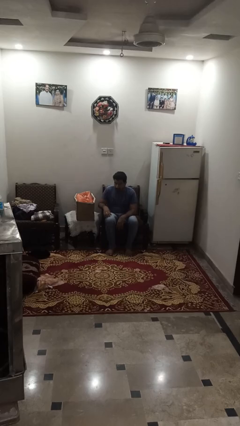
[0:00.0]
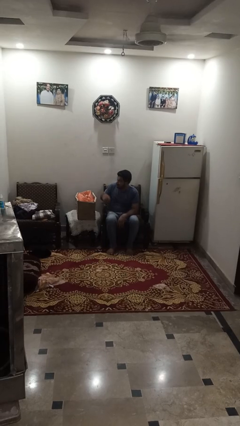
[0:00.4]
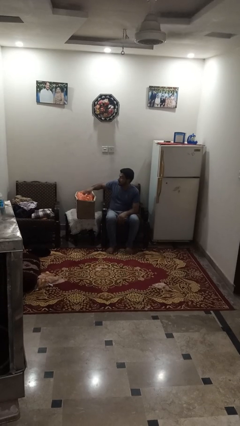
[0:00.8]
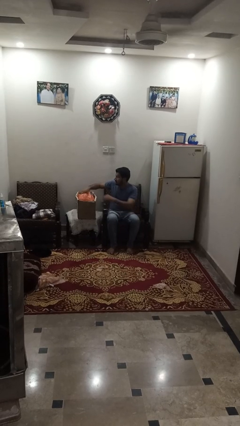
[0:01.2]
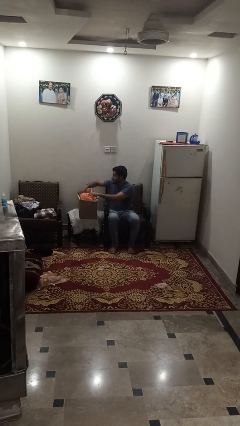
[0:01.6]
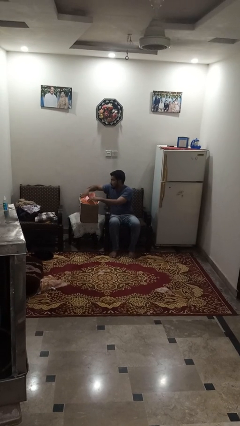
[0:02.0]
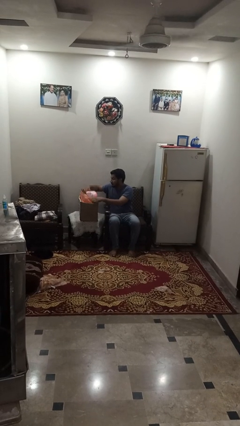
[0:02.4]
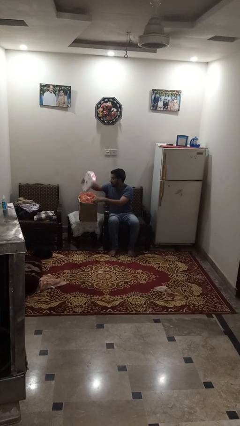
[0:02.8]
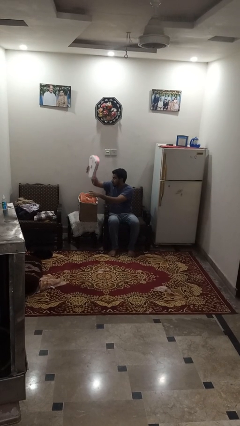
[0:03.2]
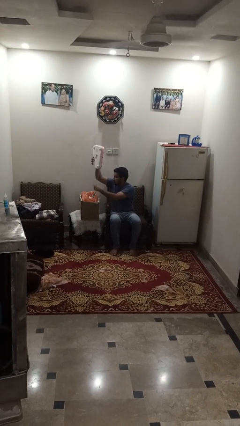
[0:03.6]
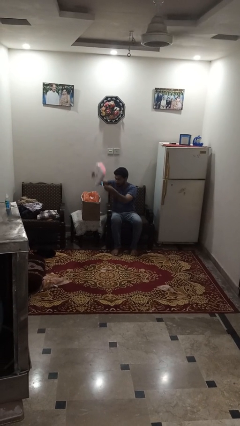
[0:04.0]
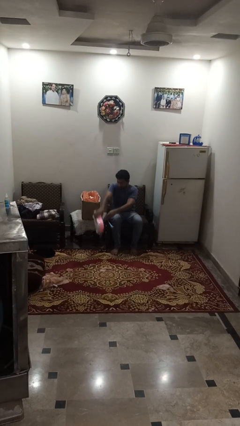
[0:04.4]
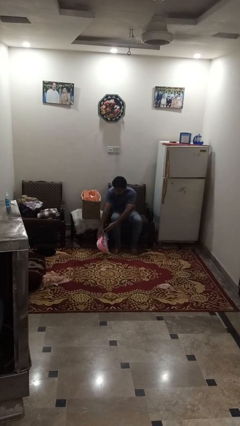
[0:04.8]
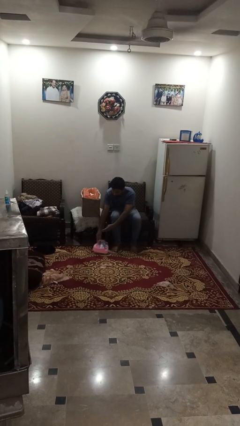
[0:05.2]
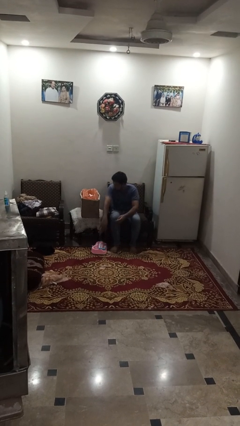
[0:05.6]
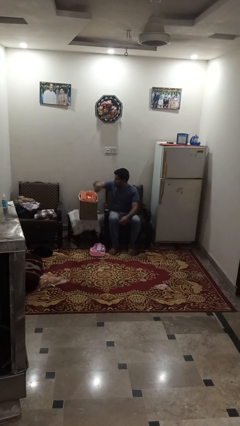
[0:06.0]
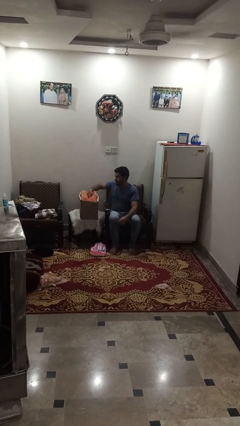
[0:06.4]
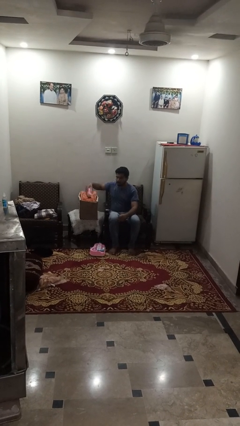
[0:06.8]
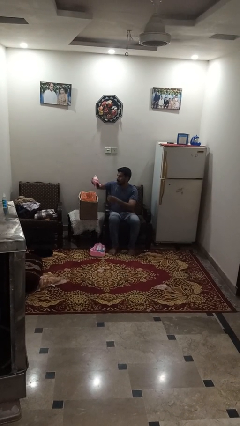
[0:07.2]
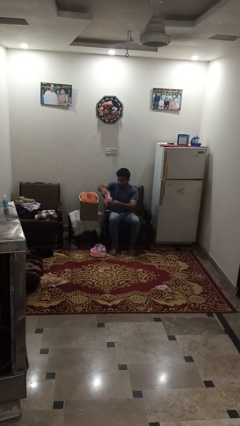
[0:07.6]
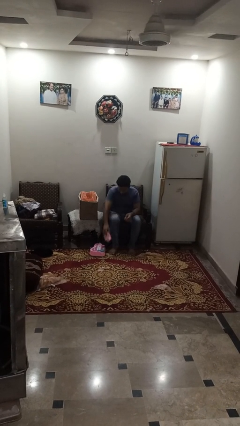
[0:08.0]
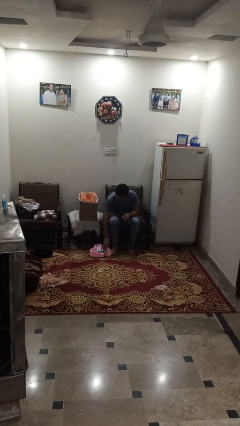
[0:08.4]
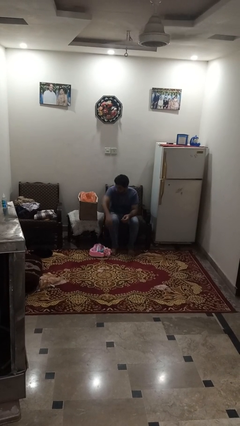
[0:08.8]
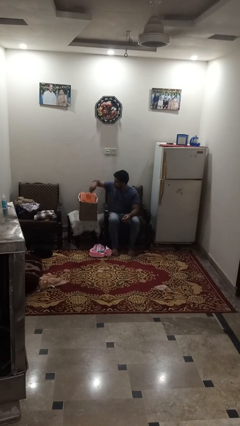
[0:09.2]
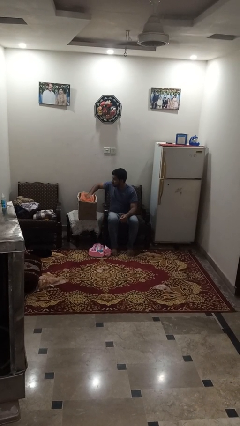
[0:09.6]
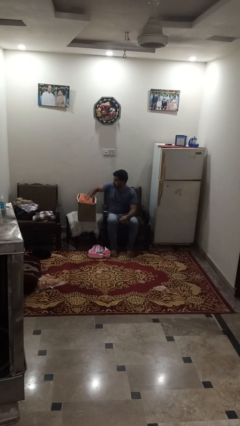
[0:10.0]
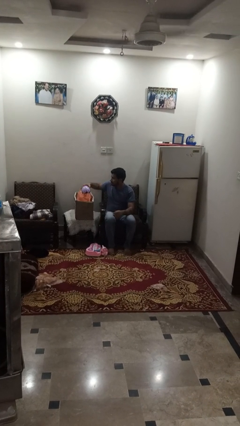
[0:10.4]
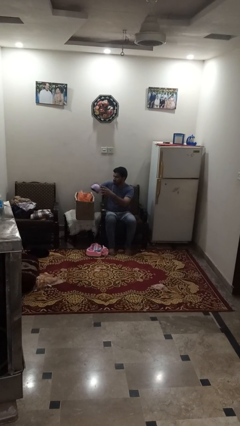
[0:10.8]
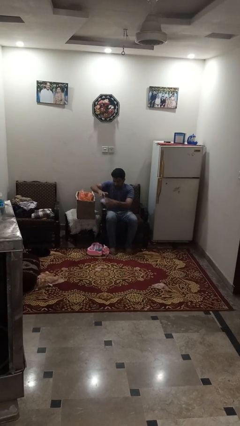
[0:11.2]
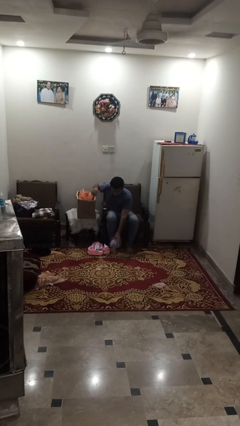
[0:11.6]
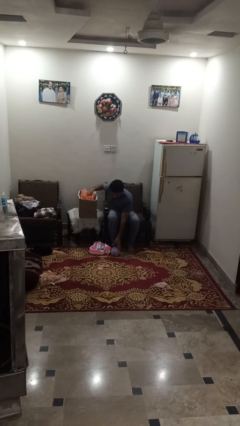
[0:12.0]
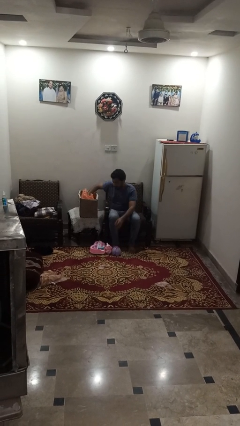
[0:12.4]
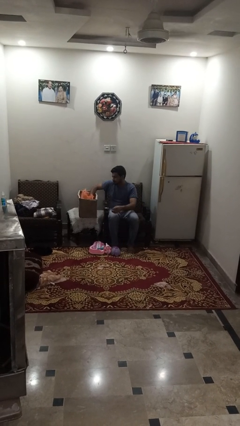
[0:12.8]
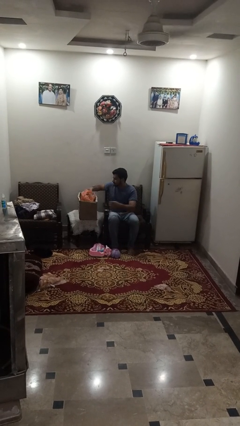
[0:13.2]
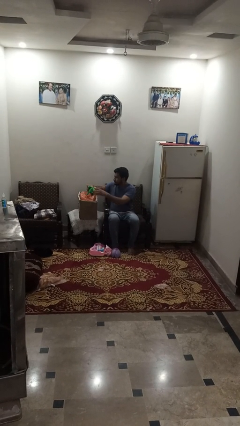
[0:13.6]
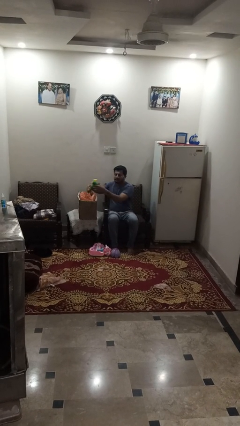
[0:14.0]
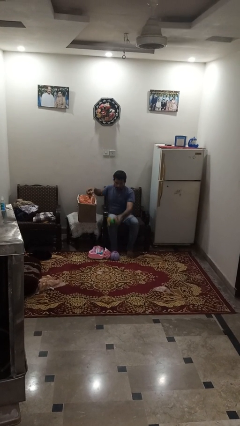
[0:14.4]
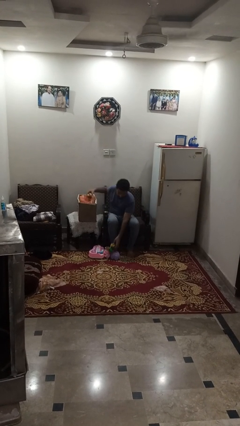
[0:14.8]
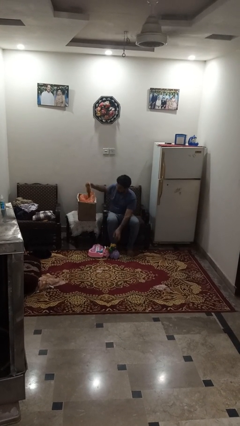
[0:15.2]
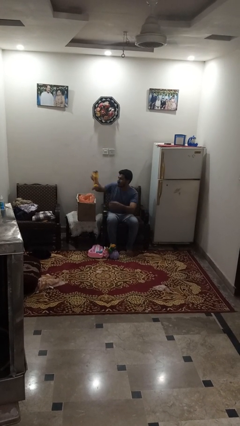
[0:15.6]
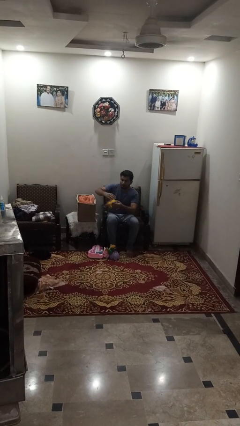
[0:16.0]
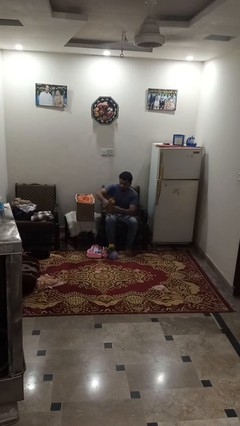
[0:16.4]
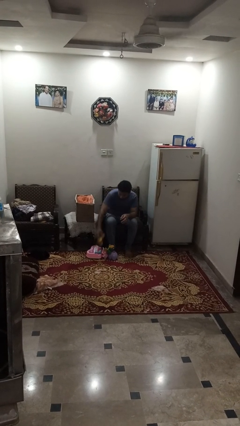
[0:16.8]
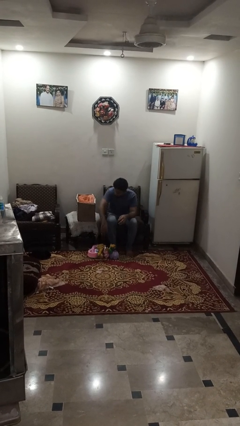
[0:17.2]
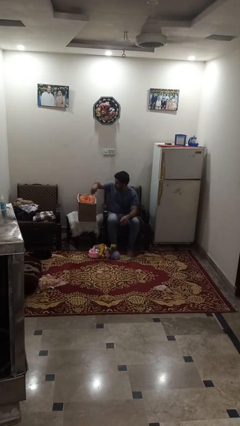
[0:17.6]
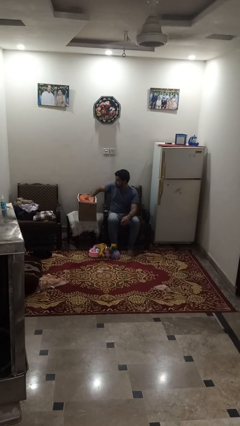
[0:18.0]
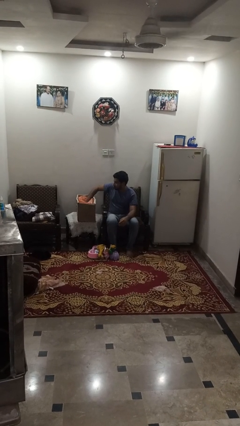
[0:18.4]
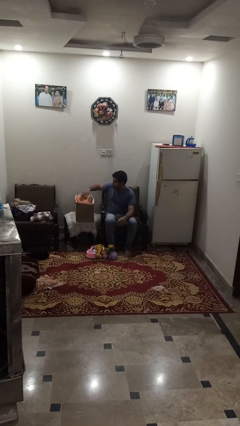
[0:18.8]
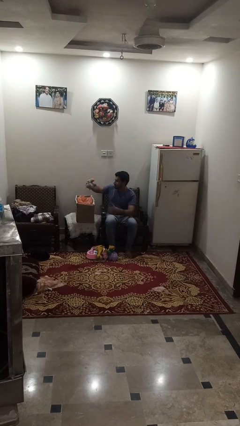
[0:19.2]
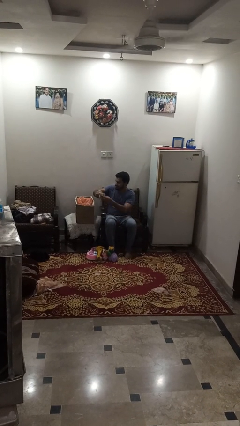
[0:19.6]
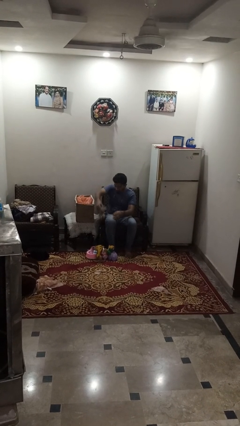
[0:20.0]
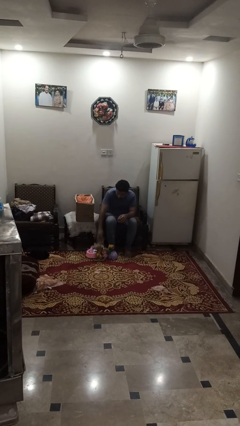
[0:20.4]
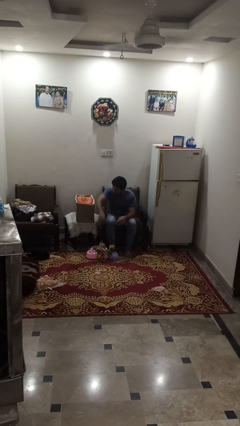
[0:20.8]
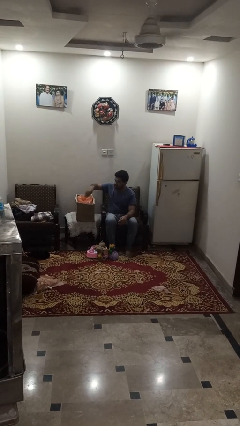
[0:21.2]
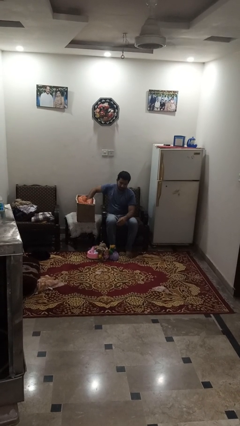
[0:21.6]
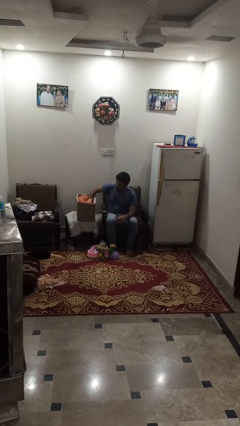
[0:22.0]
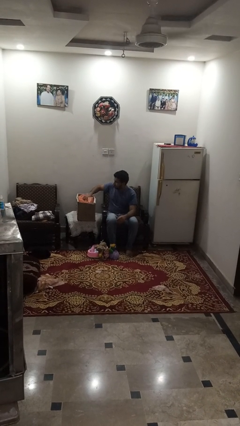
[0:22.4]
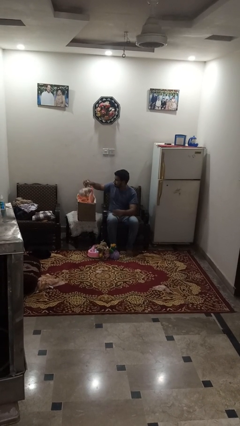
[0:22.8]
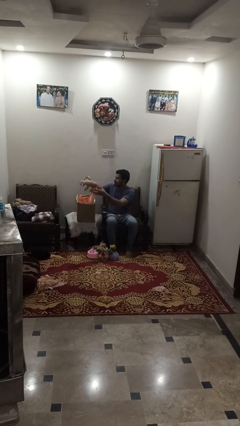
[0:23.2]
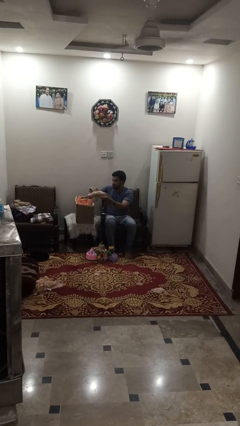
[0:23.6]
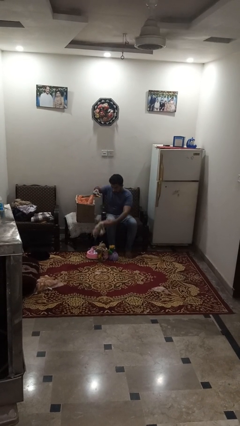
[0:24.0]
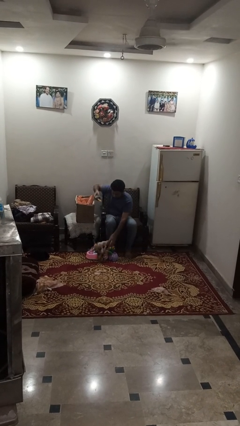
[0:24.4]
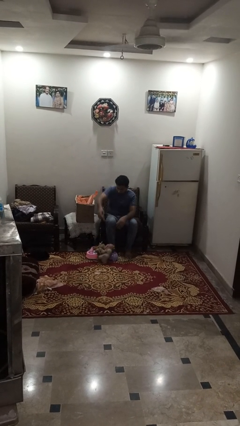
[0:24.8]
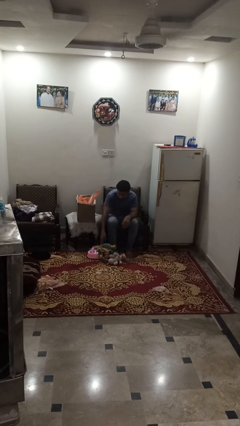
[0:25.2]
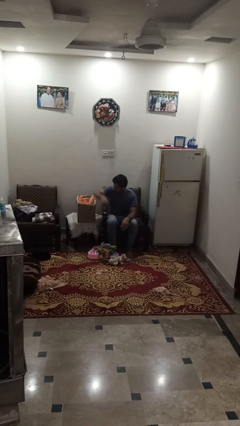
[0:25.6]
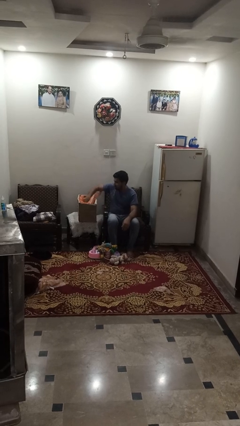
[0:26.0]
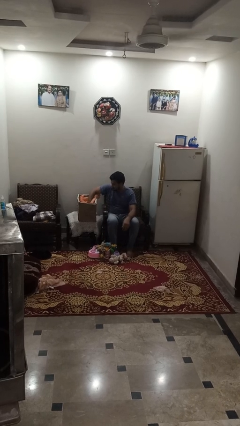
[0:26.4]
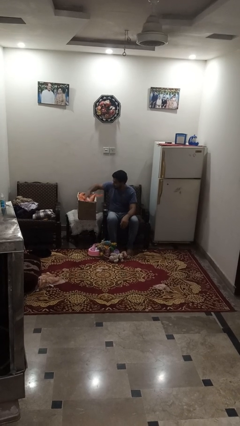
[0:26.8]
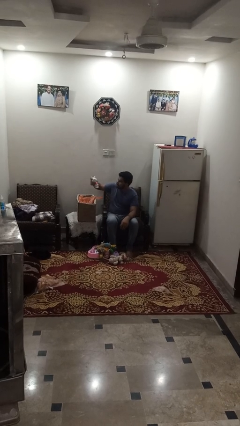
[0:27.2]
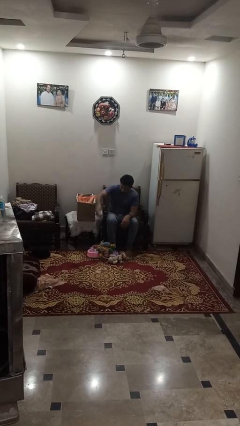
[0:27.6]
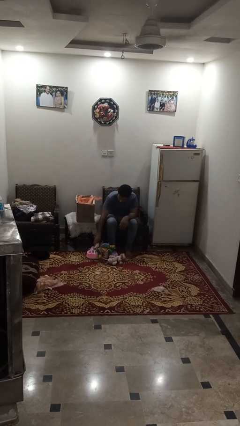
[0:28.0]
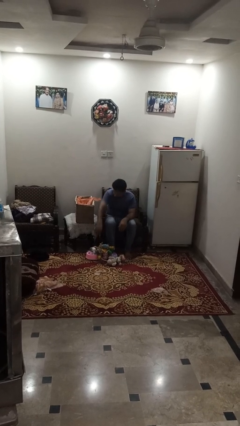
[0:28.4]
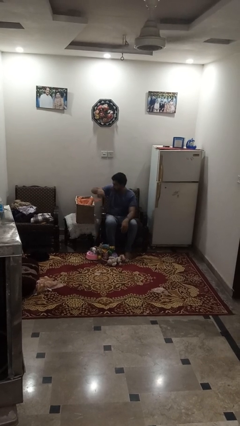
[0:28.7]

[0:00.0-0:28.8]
person unloads box onto table

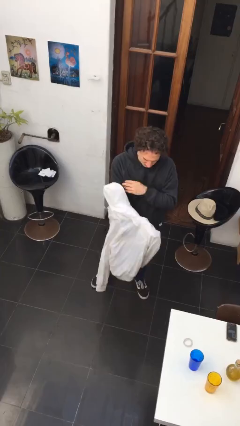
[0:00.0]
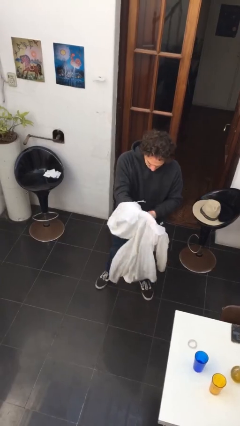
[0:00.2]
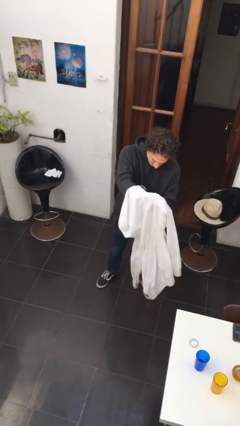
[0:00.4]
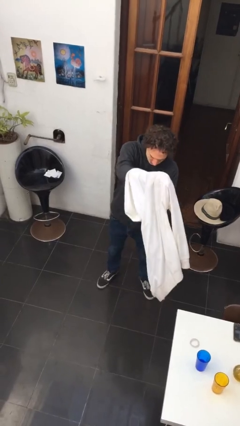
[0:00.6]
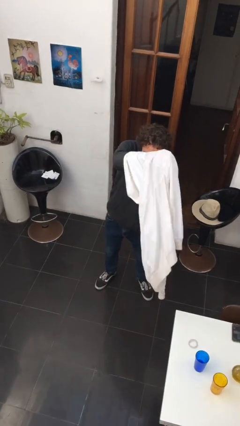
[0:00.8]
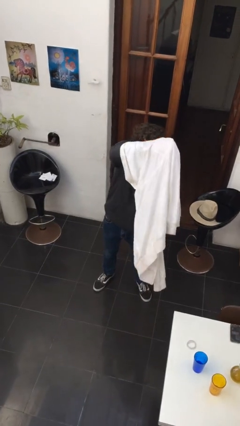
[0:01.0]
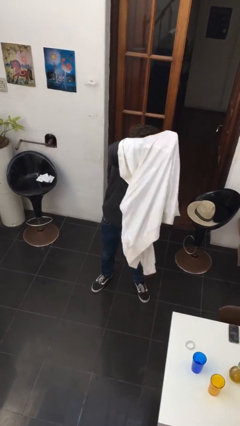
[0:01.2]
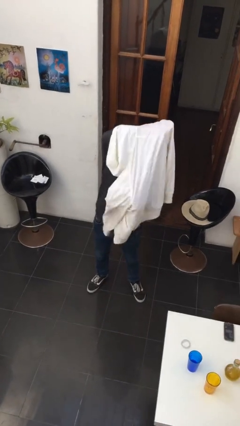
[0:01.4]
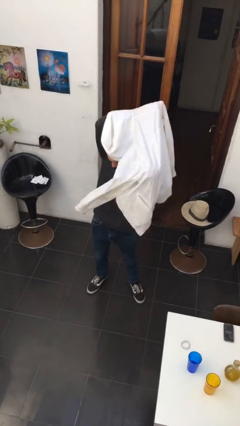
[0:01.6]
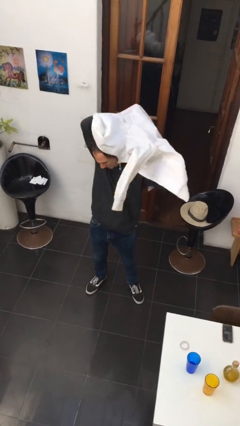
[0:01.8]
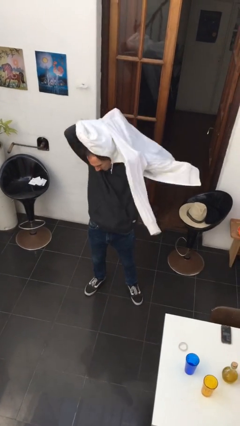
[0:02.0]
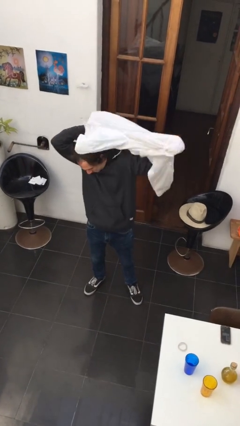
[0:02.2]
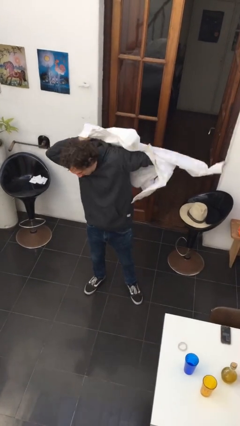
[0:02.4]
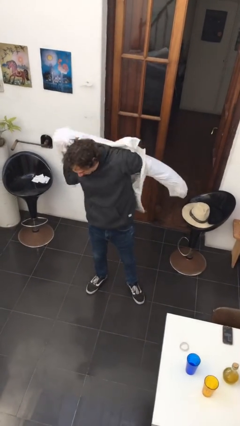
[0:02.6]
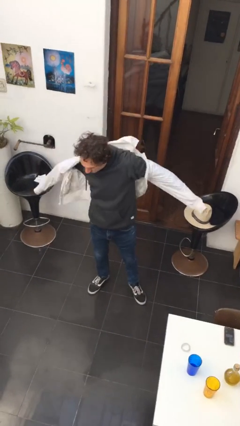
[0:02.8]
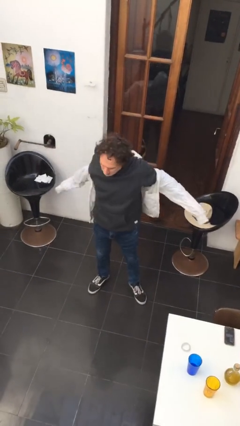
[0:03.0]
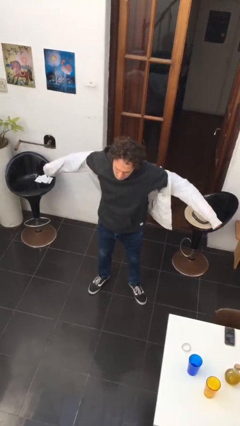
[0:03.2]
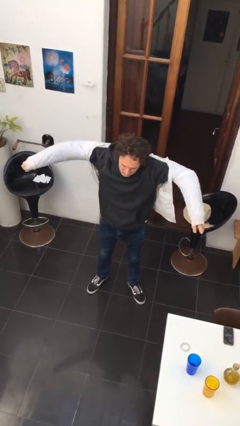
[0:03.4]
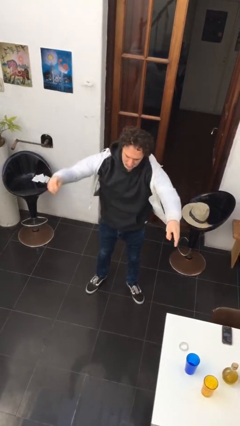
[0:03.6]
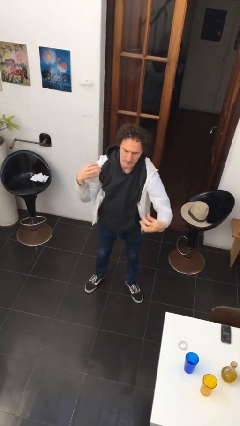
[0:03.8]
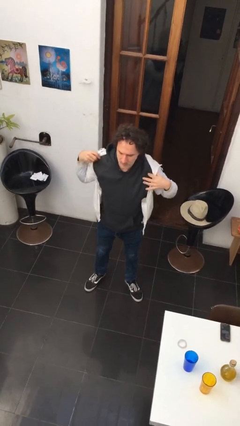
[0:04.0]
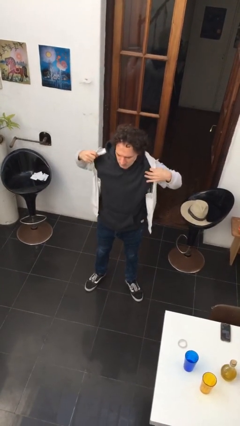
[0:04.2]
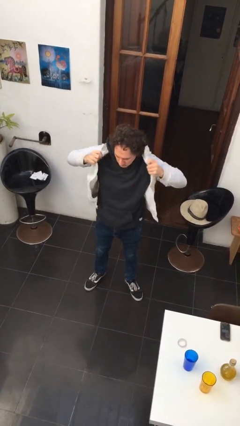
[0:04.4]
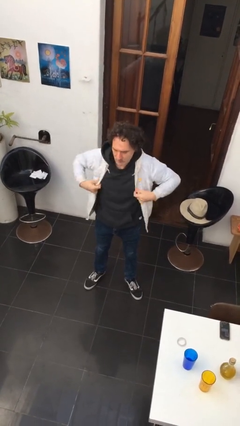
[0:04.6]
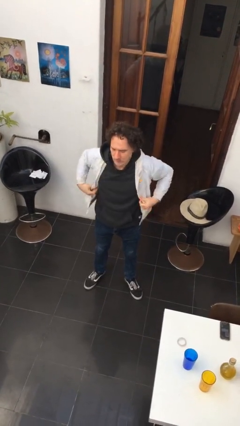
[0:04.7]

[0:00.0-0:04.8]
person puts on jacket
